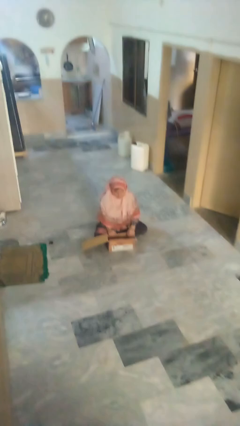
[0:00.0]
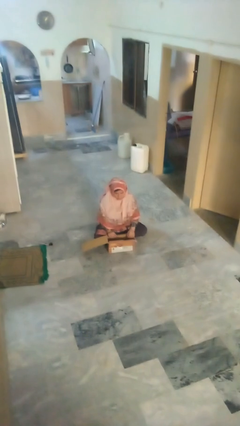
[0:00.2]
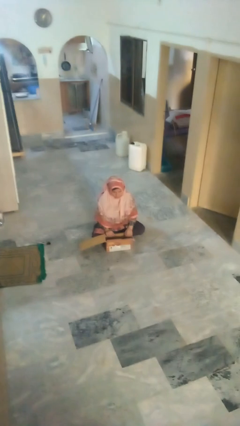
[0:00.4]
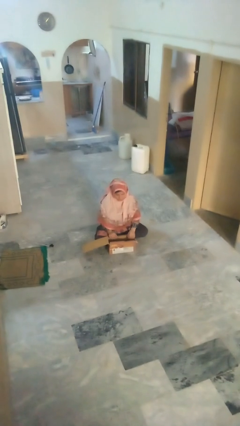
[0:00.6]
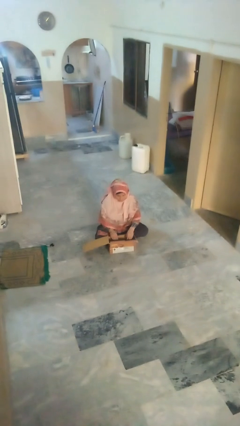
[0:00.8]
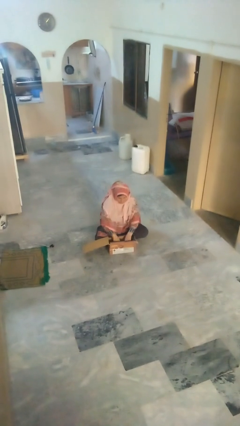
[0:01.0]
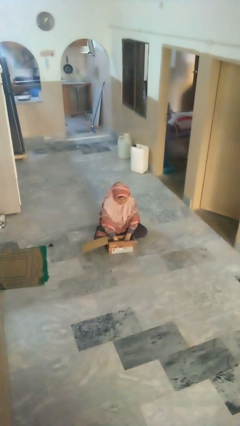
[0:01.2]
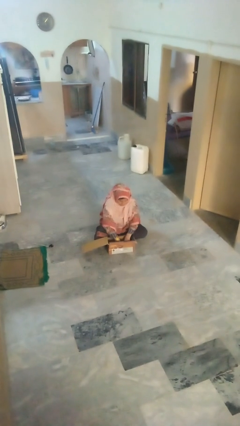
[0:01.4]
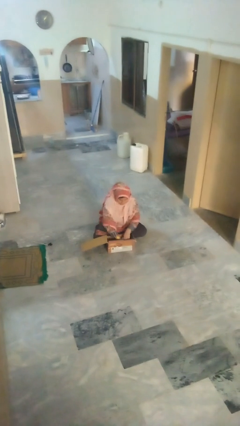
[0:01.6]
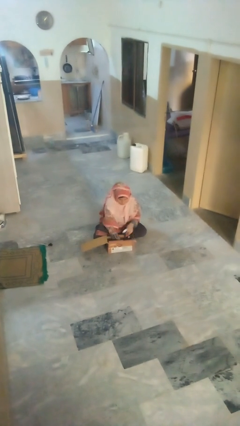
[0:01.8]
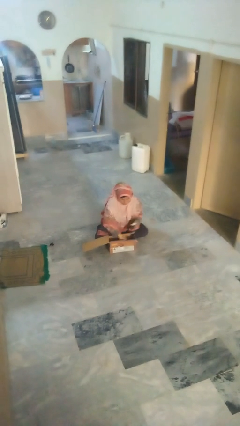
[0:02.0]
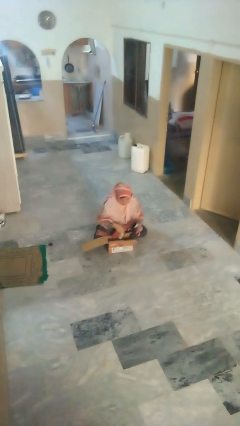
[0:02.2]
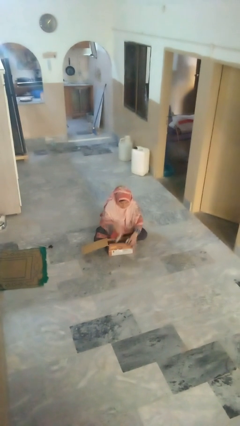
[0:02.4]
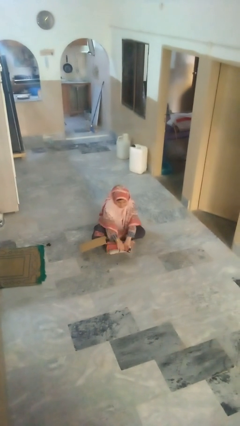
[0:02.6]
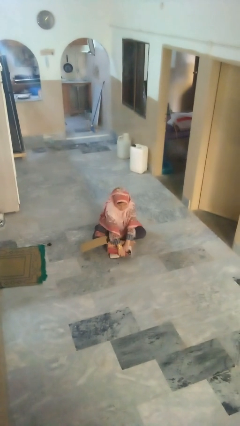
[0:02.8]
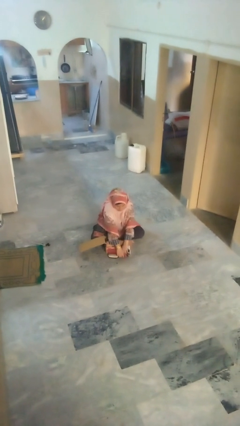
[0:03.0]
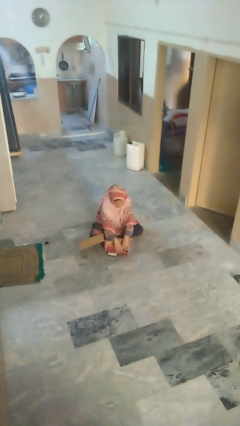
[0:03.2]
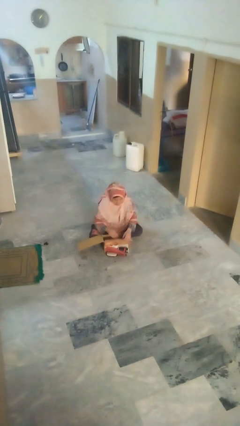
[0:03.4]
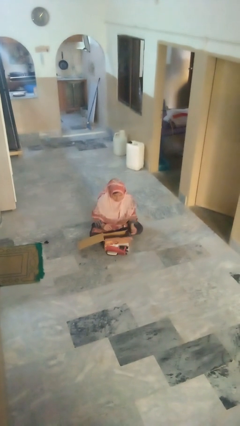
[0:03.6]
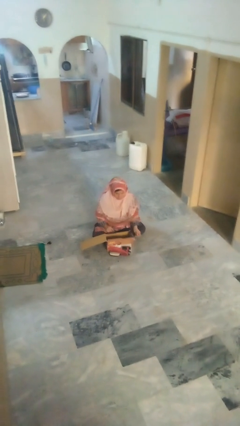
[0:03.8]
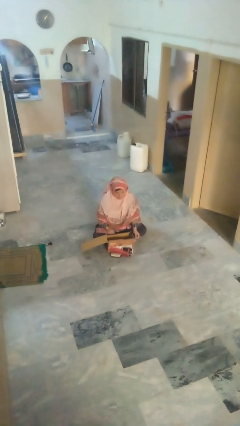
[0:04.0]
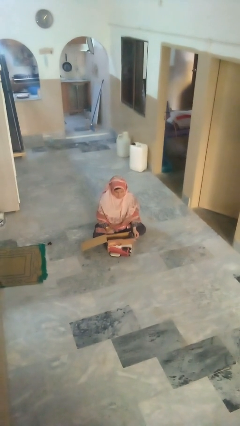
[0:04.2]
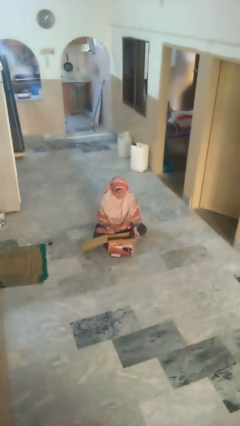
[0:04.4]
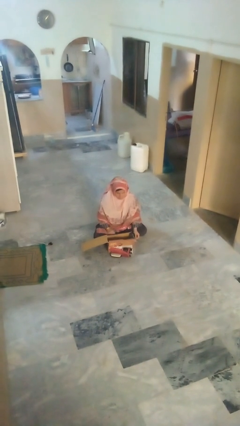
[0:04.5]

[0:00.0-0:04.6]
person takes object from box

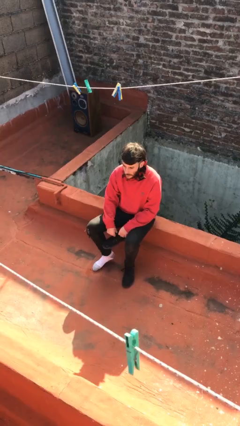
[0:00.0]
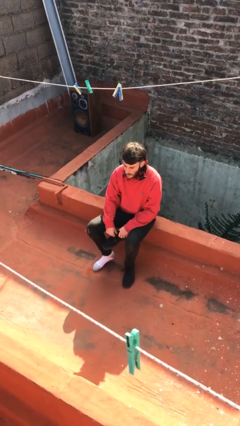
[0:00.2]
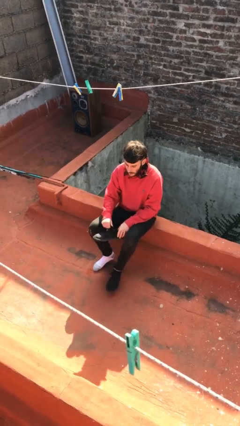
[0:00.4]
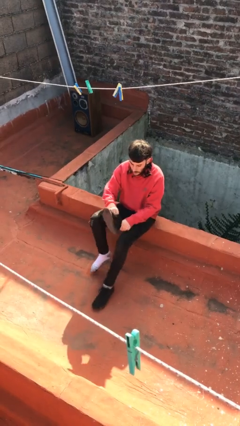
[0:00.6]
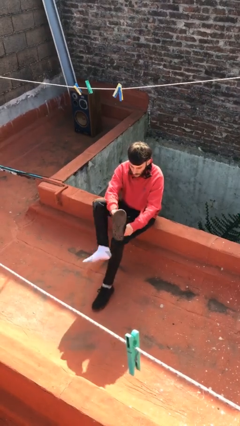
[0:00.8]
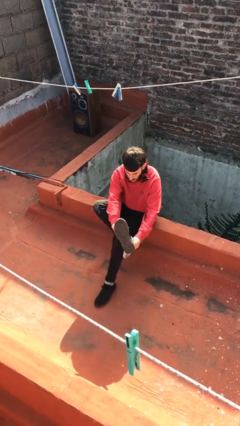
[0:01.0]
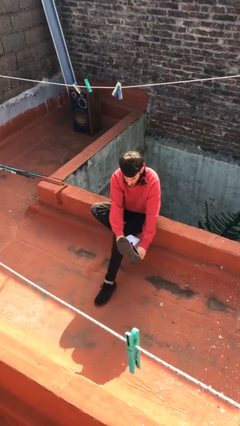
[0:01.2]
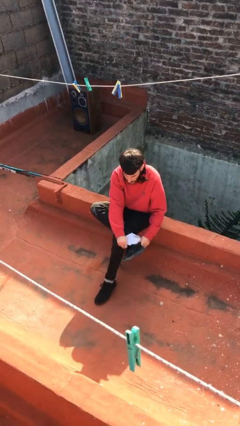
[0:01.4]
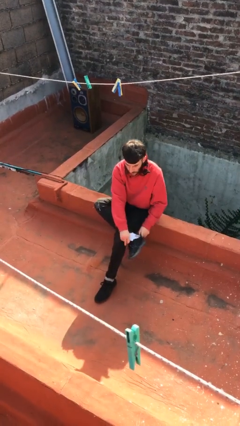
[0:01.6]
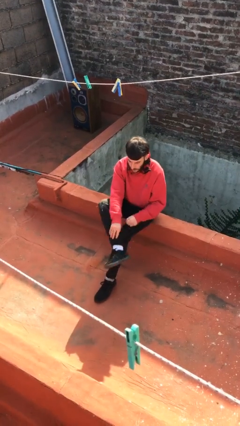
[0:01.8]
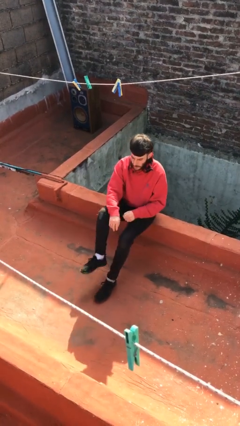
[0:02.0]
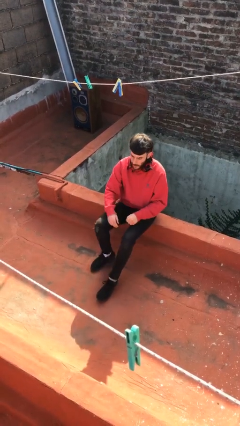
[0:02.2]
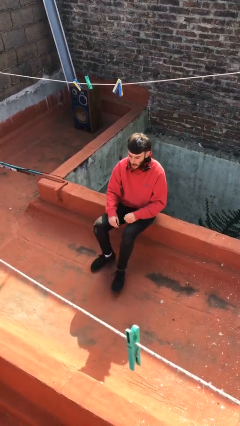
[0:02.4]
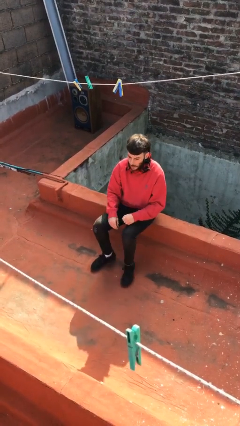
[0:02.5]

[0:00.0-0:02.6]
person puts on shoes

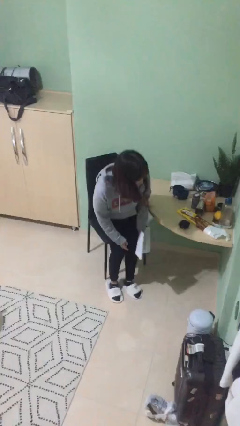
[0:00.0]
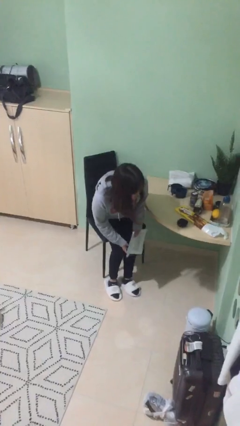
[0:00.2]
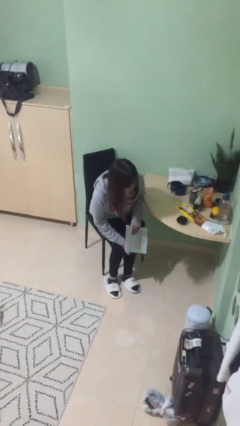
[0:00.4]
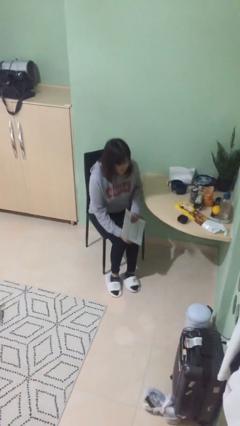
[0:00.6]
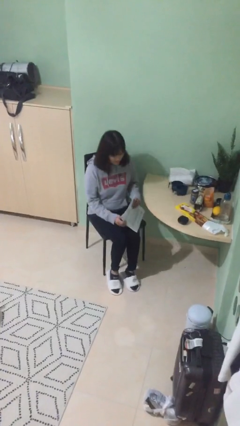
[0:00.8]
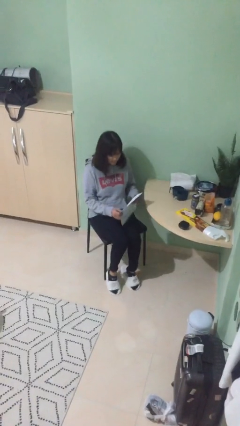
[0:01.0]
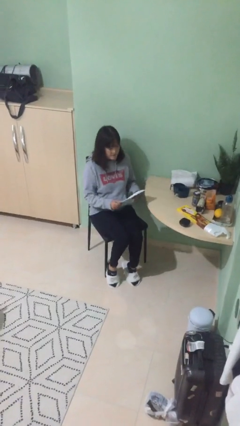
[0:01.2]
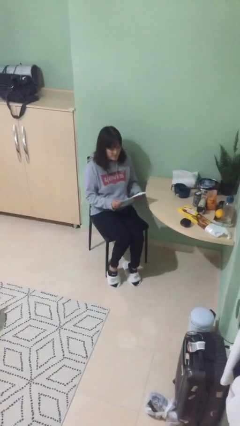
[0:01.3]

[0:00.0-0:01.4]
person sits down

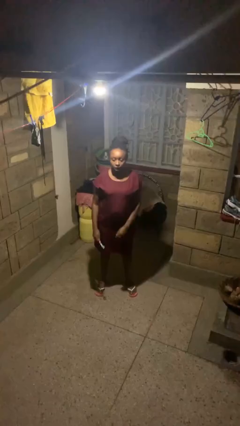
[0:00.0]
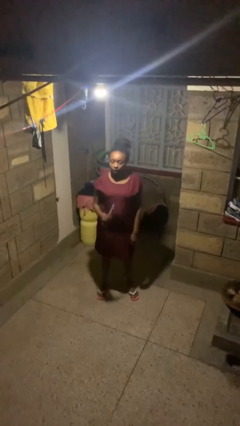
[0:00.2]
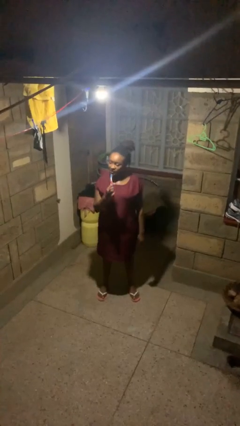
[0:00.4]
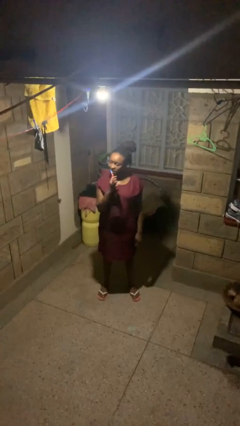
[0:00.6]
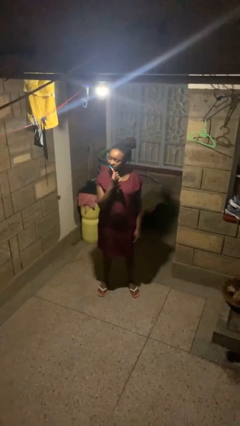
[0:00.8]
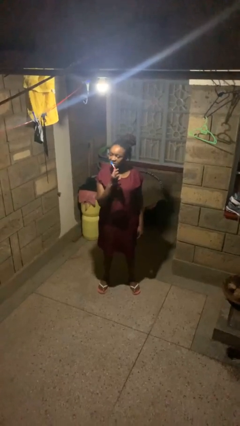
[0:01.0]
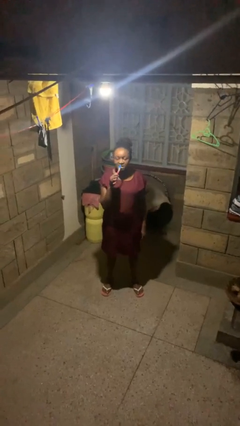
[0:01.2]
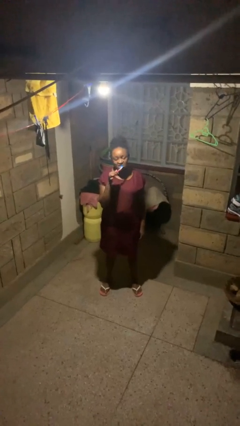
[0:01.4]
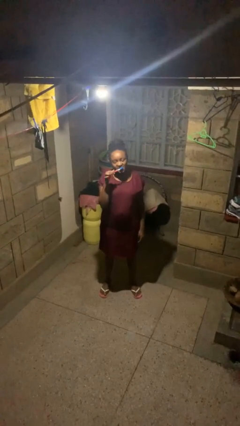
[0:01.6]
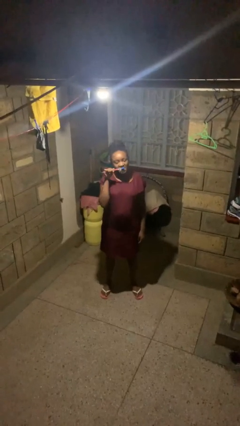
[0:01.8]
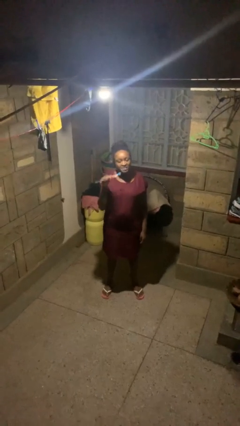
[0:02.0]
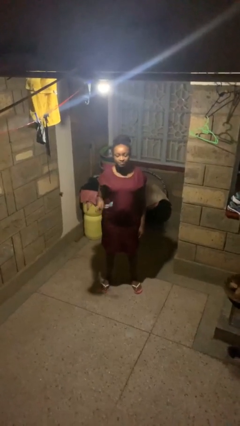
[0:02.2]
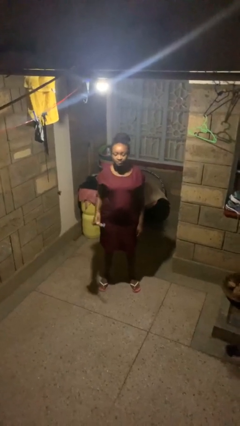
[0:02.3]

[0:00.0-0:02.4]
person brushes teeth

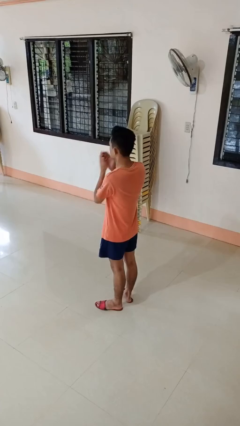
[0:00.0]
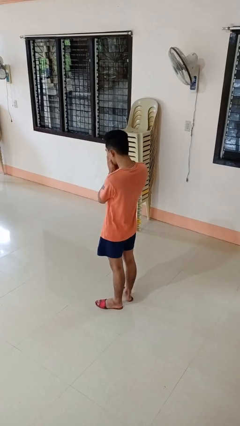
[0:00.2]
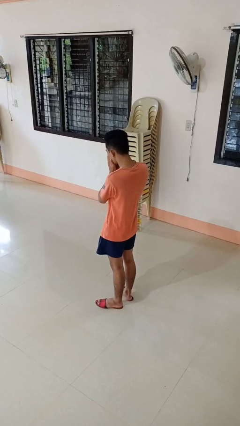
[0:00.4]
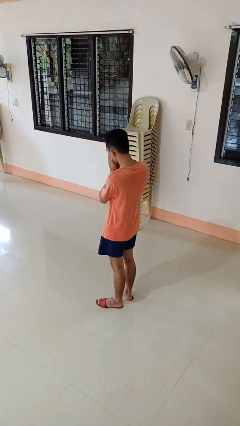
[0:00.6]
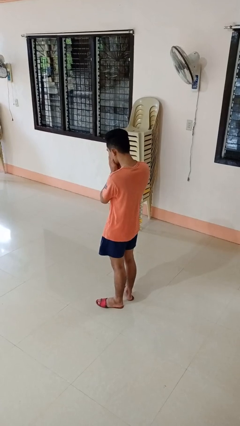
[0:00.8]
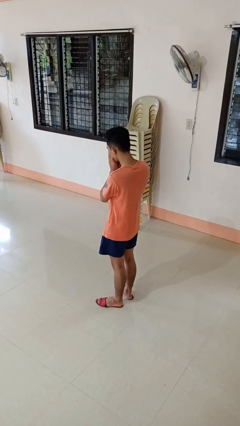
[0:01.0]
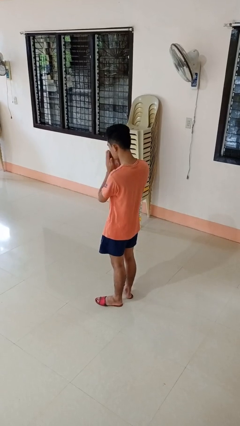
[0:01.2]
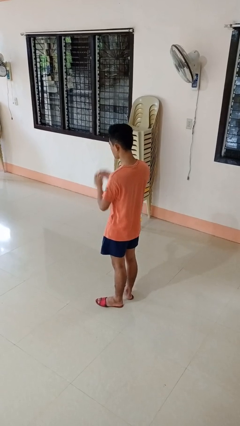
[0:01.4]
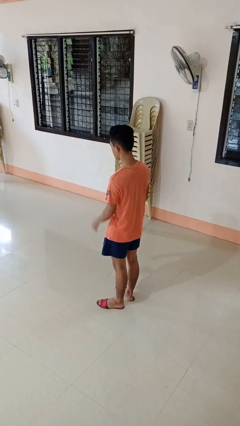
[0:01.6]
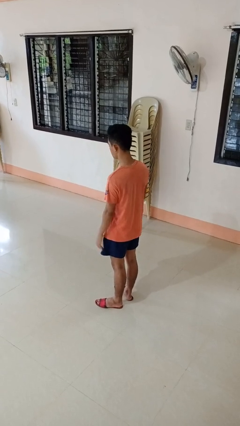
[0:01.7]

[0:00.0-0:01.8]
person sneezes into hand

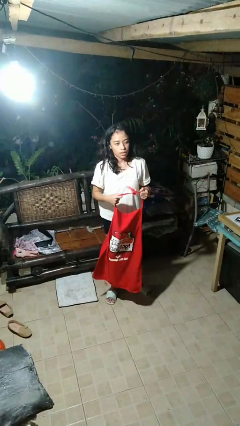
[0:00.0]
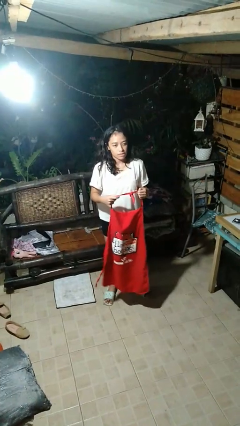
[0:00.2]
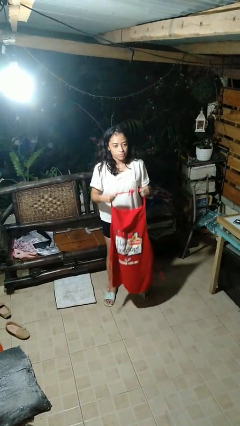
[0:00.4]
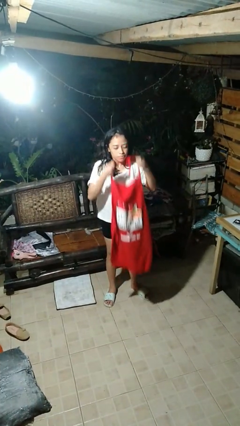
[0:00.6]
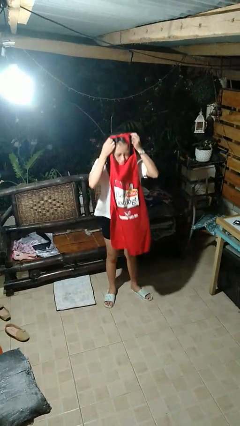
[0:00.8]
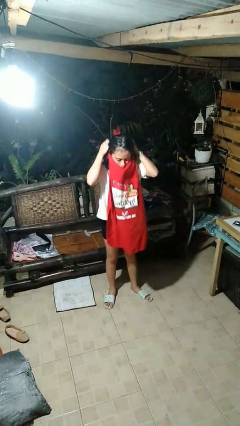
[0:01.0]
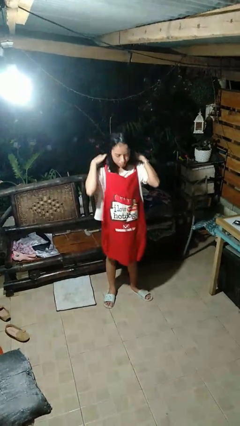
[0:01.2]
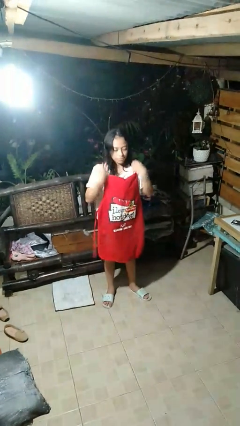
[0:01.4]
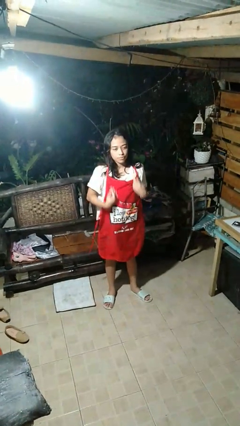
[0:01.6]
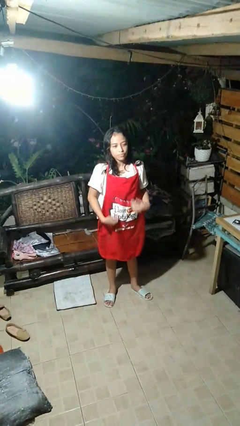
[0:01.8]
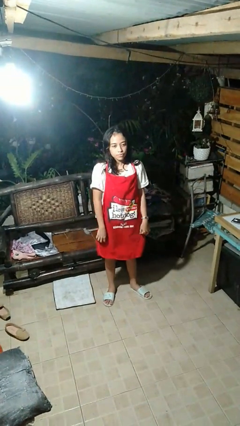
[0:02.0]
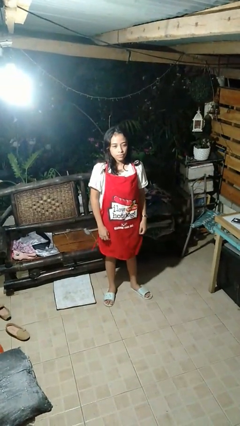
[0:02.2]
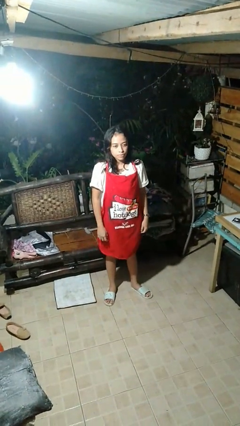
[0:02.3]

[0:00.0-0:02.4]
person puts on apron

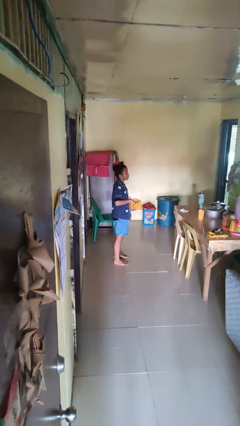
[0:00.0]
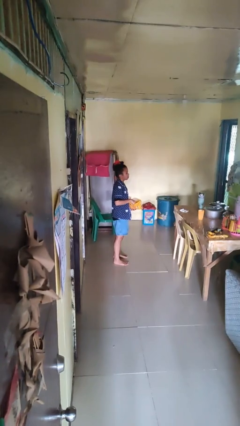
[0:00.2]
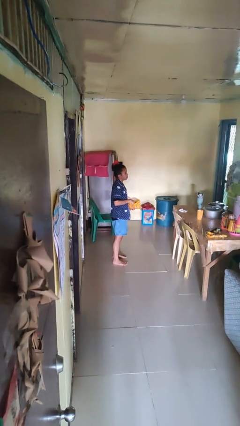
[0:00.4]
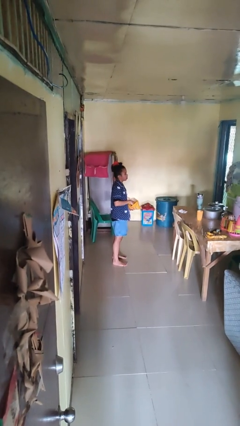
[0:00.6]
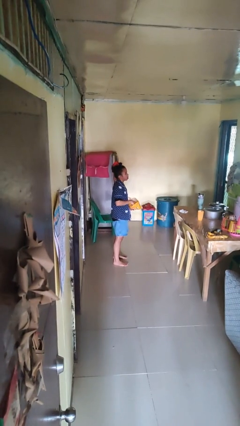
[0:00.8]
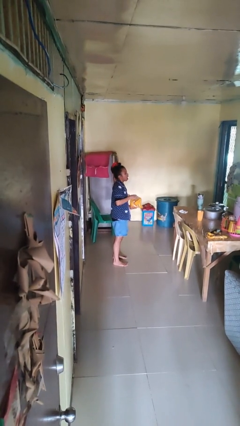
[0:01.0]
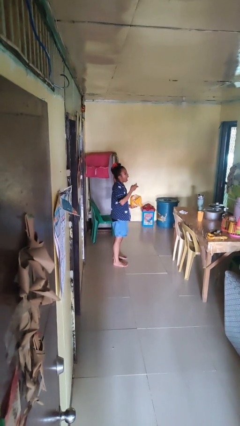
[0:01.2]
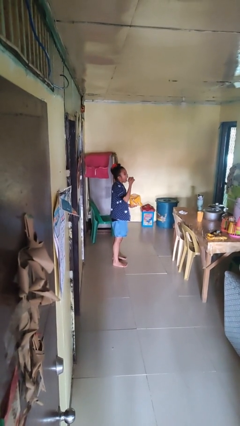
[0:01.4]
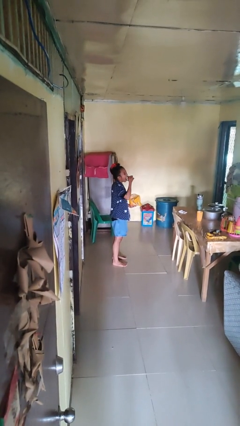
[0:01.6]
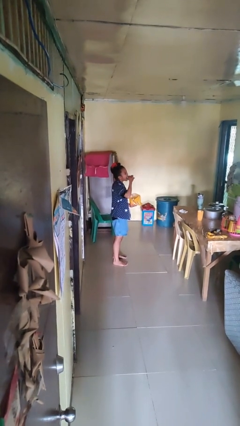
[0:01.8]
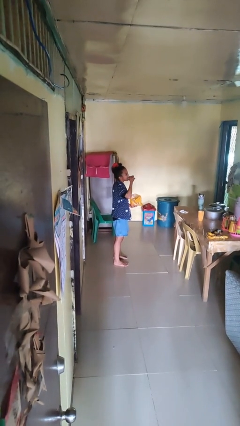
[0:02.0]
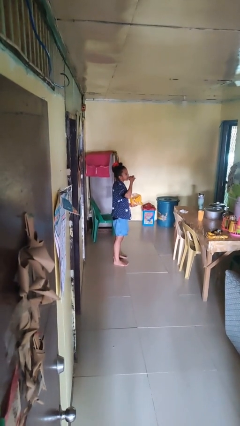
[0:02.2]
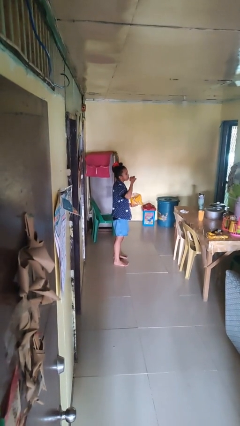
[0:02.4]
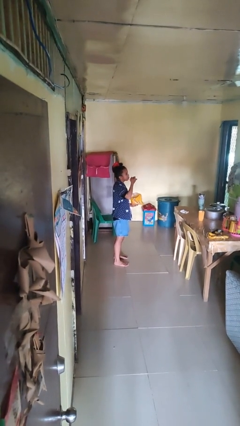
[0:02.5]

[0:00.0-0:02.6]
person eats snack from bag
